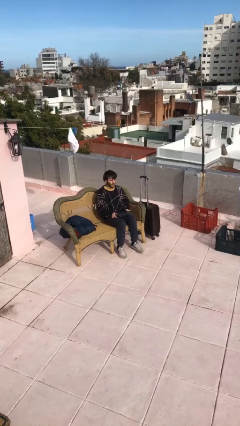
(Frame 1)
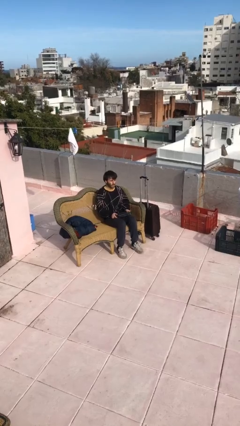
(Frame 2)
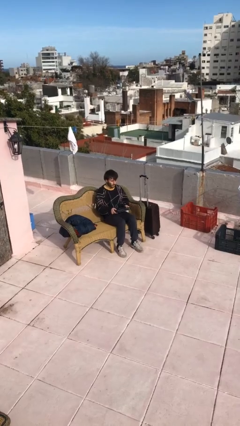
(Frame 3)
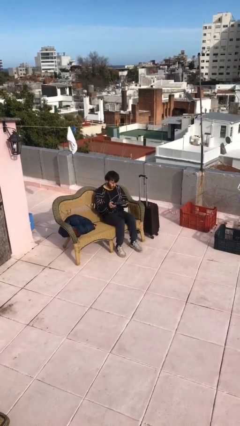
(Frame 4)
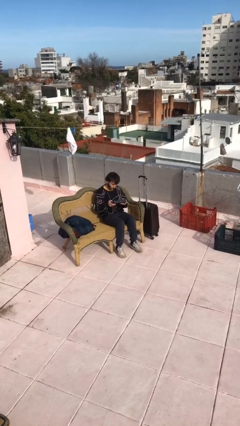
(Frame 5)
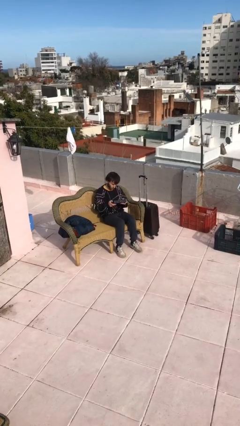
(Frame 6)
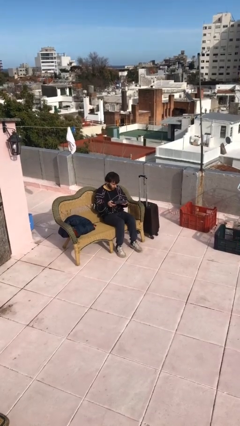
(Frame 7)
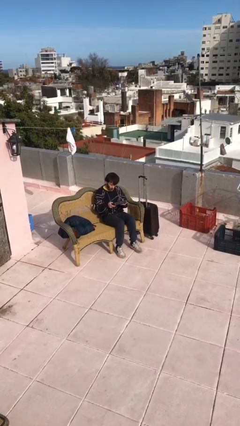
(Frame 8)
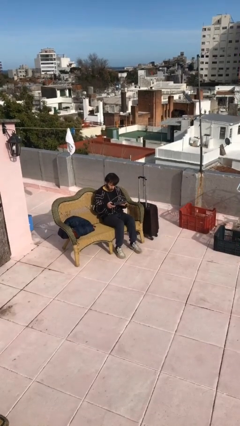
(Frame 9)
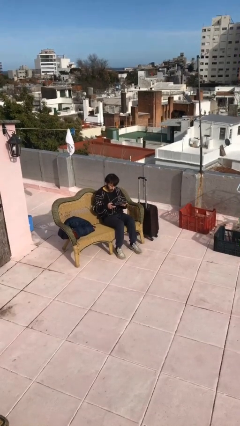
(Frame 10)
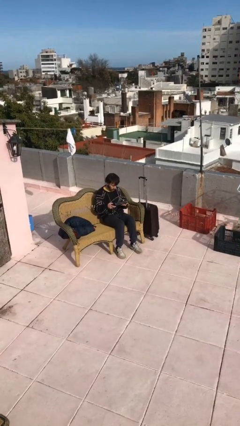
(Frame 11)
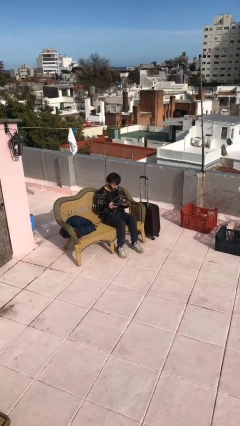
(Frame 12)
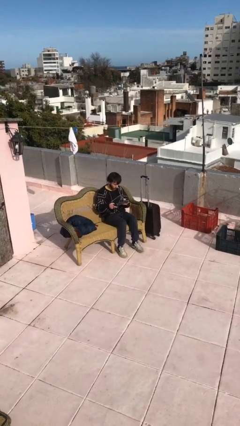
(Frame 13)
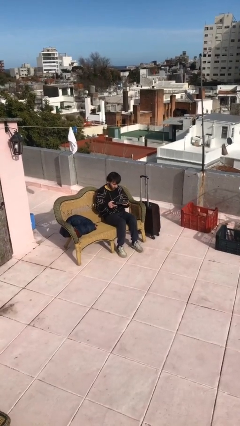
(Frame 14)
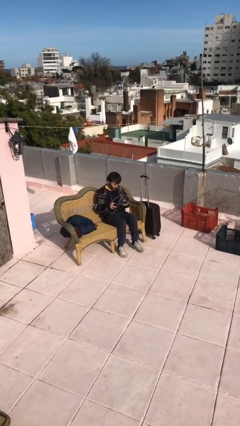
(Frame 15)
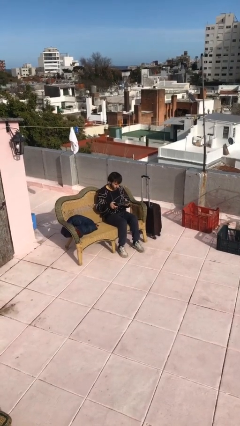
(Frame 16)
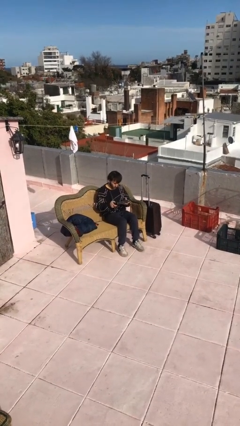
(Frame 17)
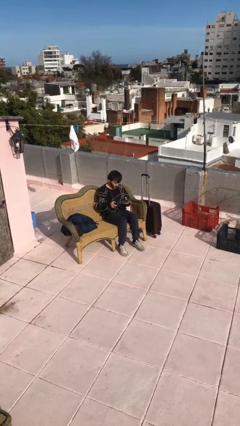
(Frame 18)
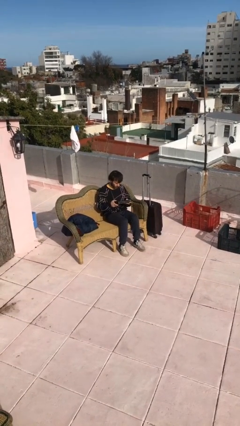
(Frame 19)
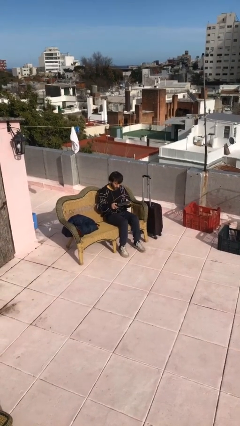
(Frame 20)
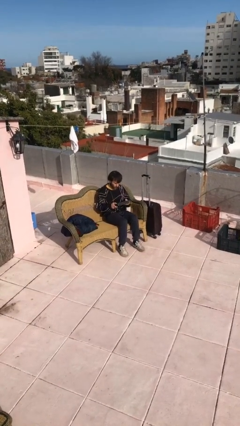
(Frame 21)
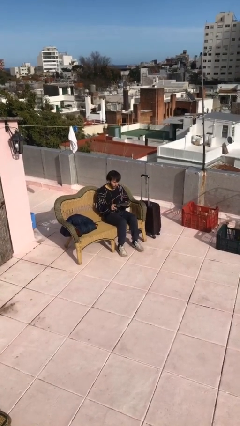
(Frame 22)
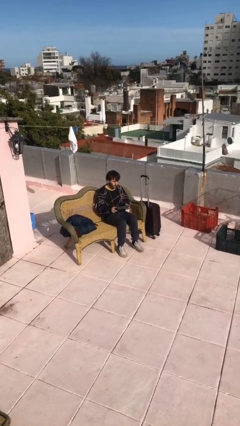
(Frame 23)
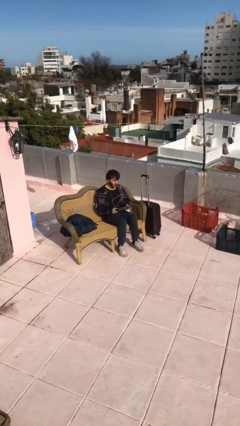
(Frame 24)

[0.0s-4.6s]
person interacts with handheld game

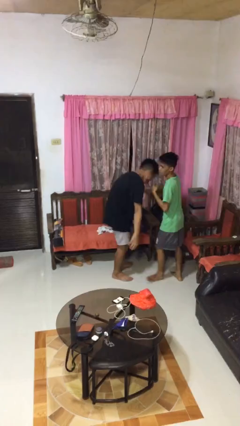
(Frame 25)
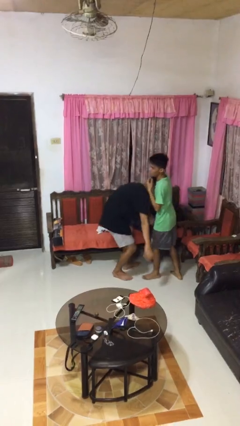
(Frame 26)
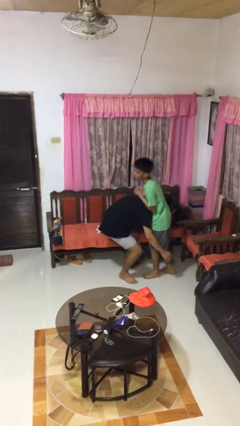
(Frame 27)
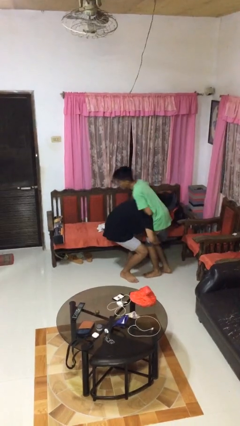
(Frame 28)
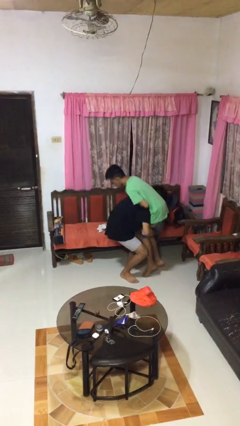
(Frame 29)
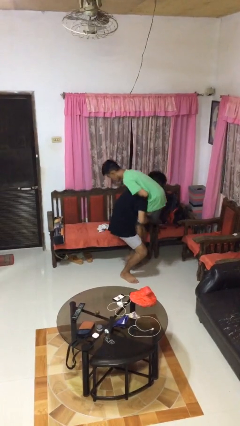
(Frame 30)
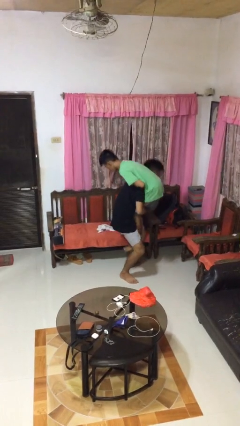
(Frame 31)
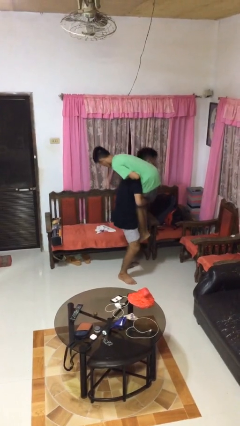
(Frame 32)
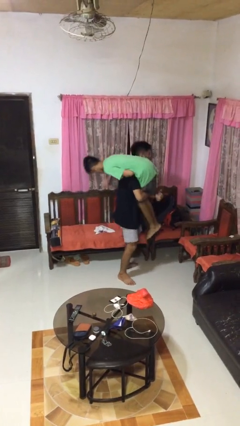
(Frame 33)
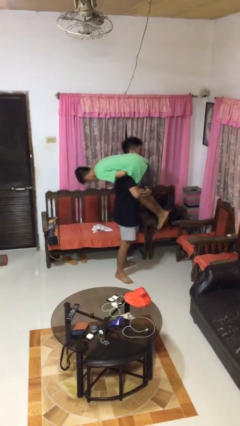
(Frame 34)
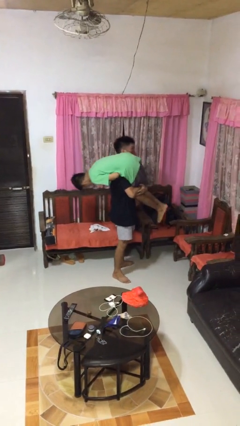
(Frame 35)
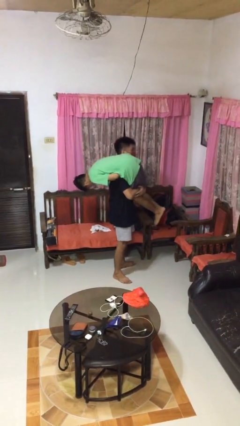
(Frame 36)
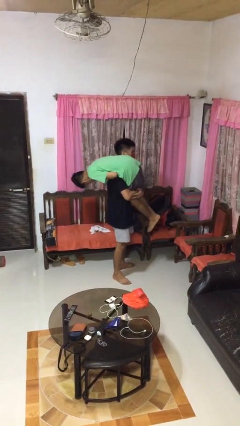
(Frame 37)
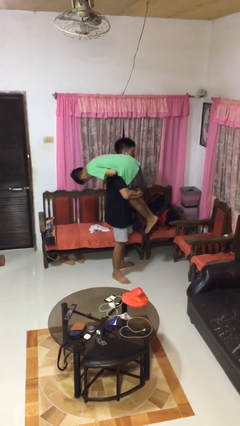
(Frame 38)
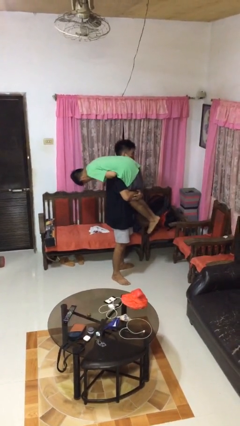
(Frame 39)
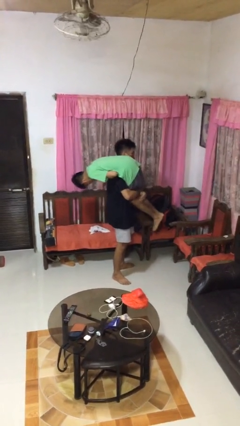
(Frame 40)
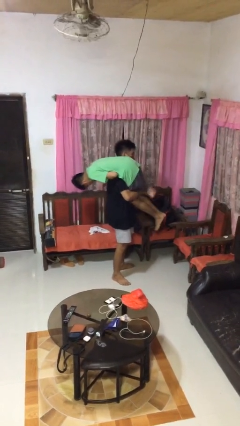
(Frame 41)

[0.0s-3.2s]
person carries person over shoulder

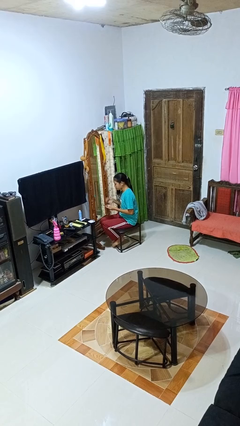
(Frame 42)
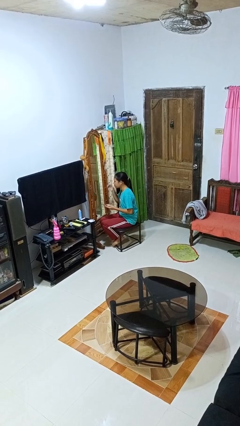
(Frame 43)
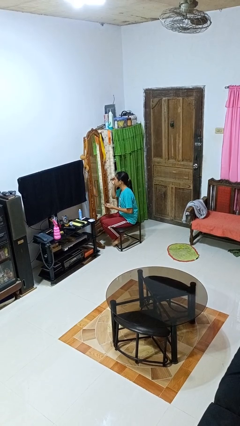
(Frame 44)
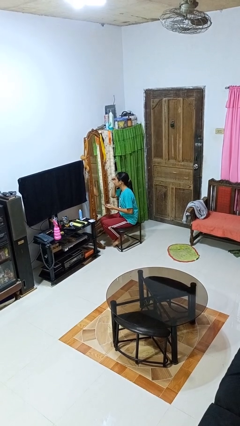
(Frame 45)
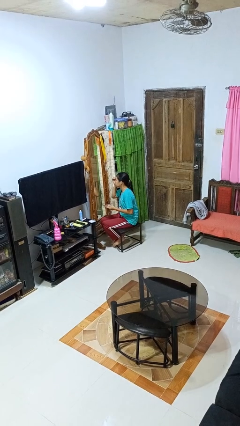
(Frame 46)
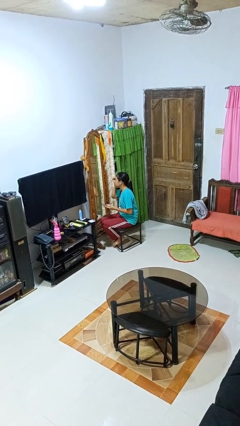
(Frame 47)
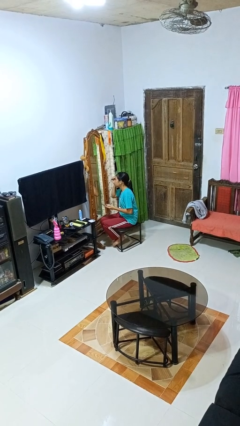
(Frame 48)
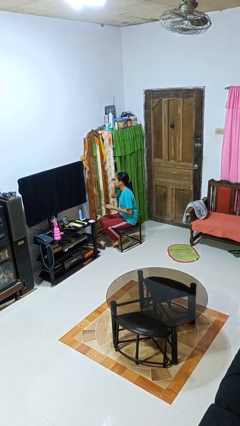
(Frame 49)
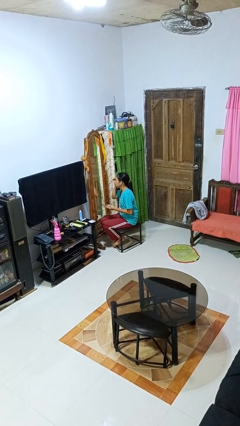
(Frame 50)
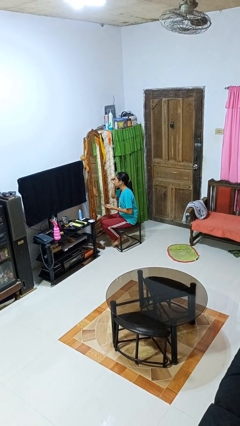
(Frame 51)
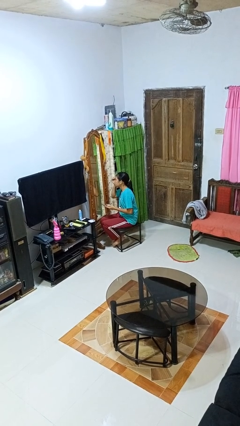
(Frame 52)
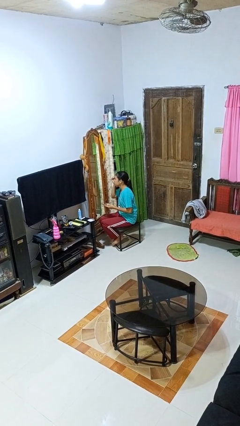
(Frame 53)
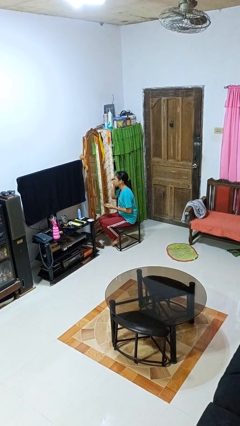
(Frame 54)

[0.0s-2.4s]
person applies eye makeup

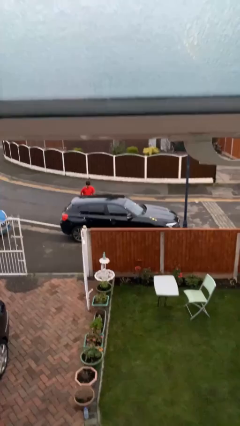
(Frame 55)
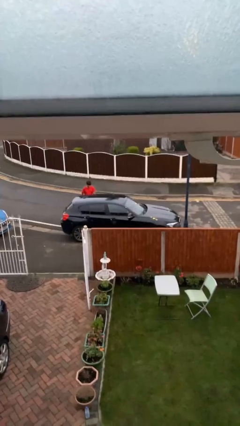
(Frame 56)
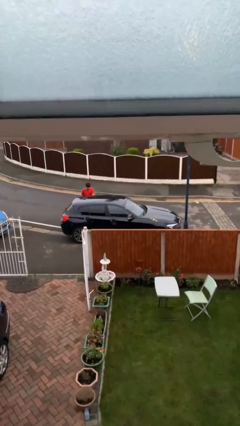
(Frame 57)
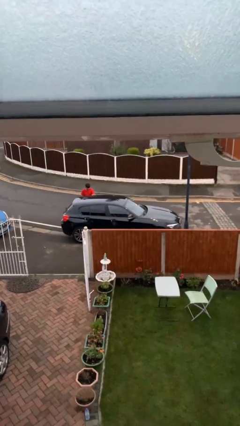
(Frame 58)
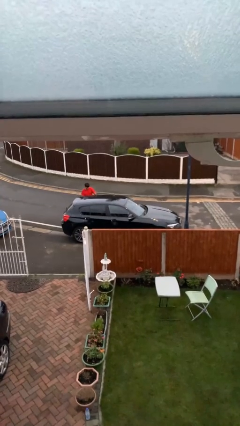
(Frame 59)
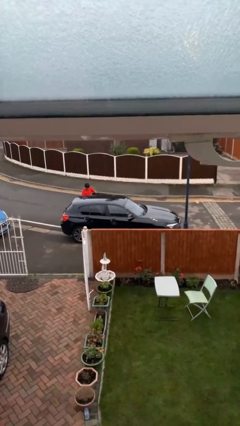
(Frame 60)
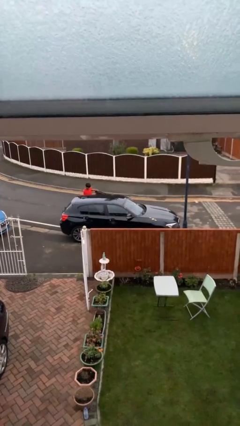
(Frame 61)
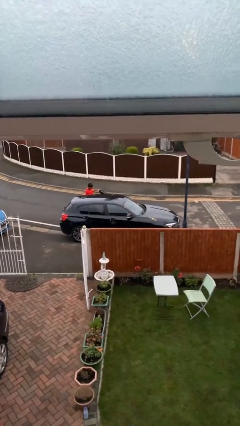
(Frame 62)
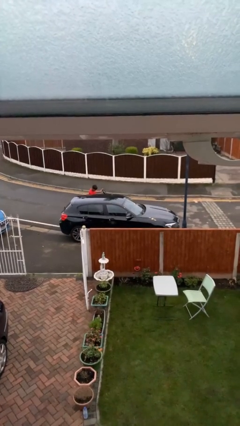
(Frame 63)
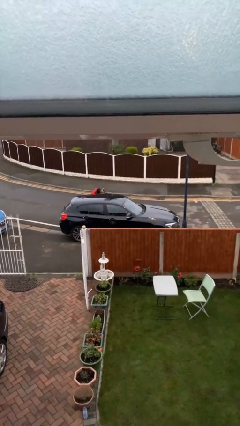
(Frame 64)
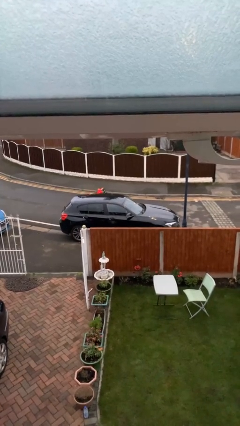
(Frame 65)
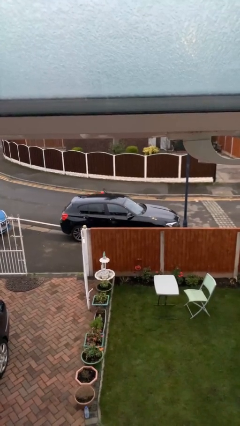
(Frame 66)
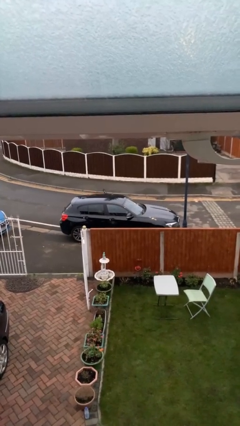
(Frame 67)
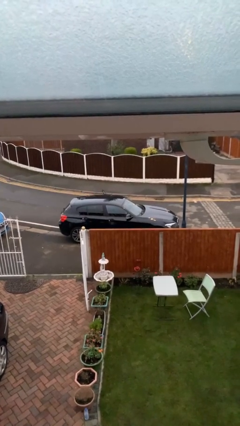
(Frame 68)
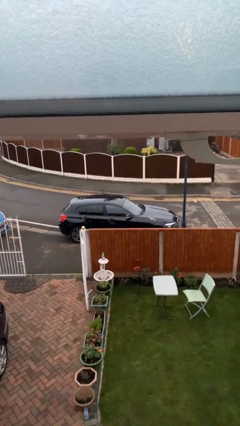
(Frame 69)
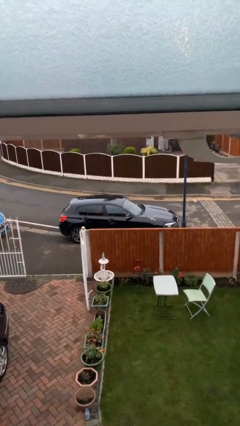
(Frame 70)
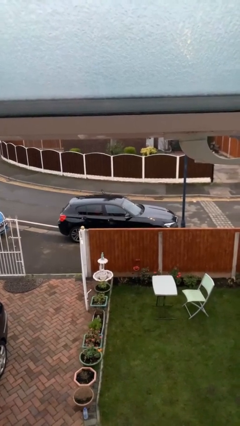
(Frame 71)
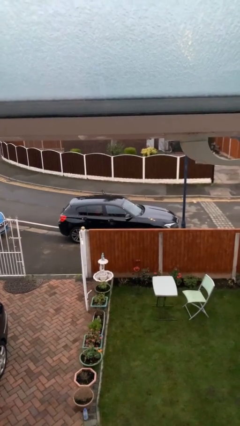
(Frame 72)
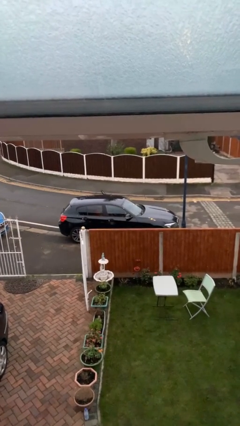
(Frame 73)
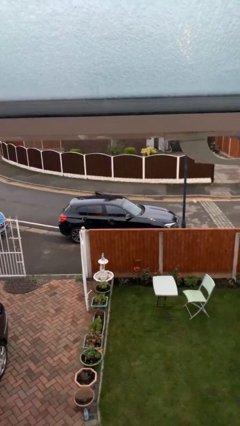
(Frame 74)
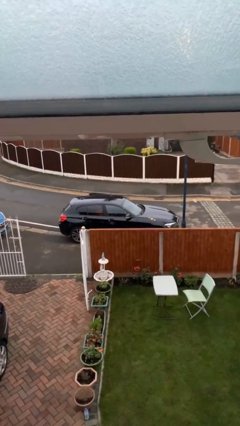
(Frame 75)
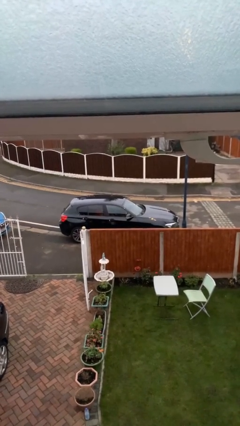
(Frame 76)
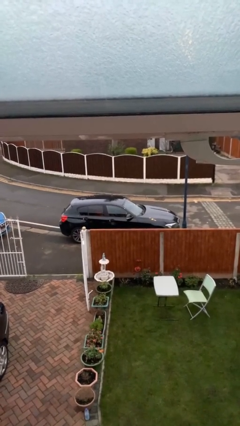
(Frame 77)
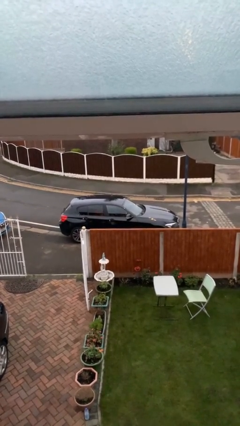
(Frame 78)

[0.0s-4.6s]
car picks up person

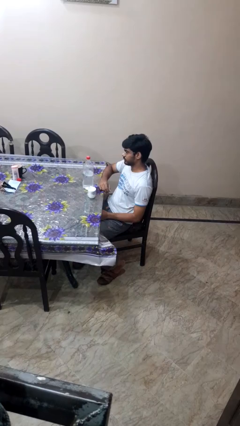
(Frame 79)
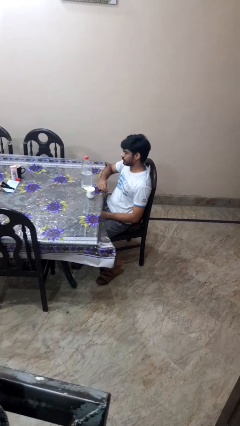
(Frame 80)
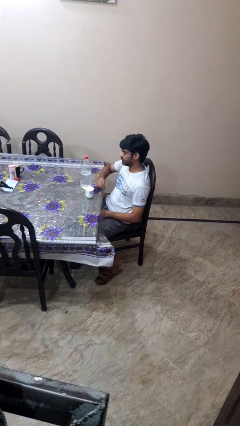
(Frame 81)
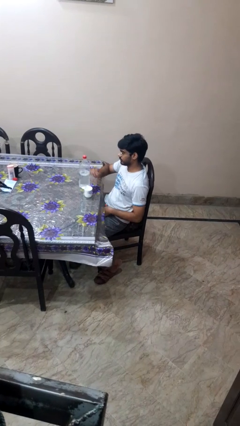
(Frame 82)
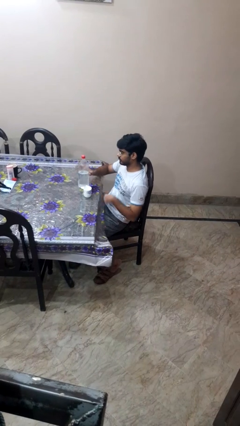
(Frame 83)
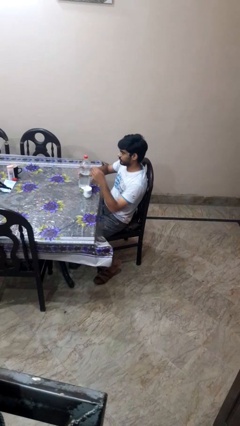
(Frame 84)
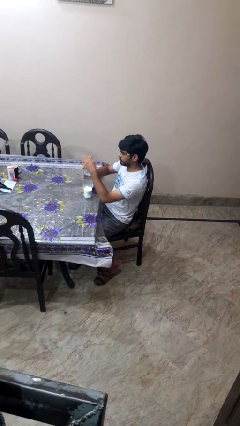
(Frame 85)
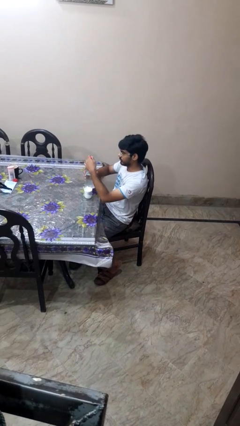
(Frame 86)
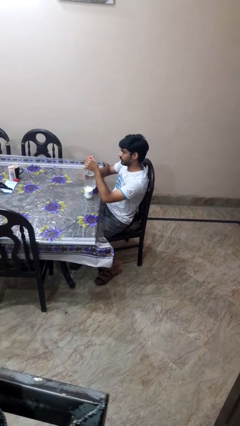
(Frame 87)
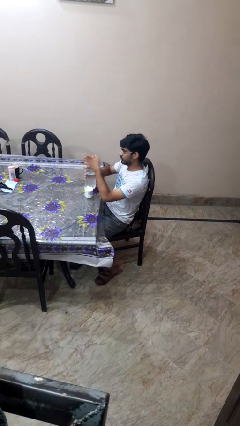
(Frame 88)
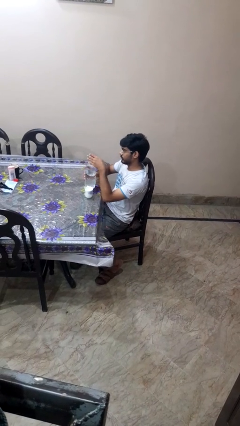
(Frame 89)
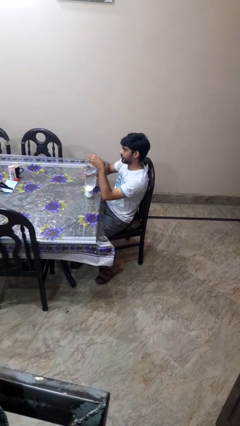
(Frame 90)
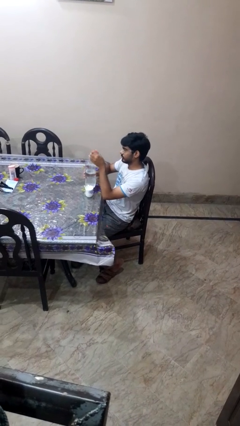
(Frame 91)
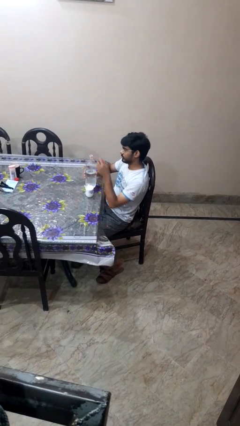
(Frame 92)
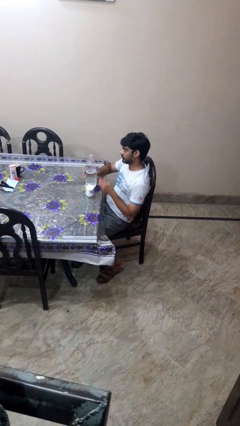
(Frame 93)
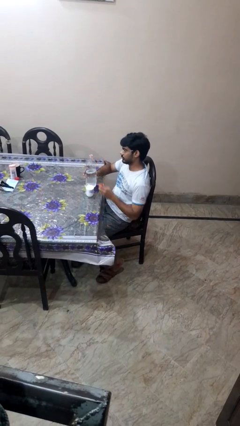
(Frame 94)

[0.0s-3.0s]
person unscrews lid from bottle

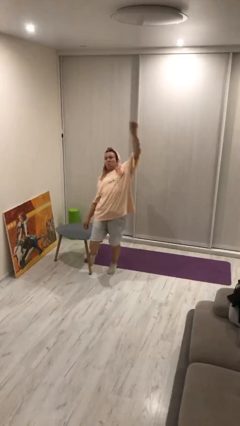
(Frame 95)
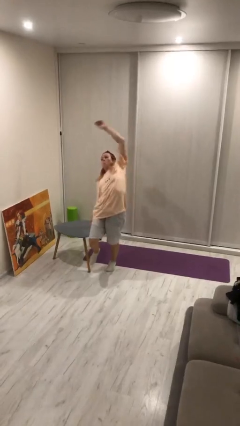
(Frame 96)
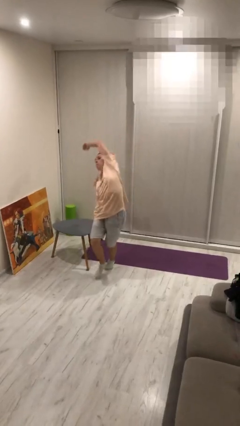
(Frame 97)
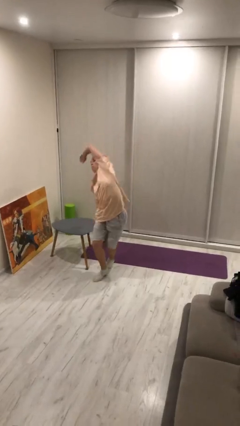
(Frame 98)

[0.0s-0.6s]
person trips on object on floor
